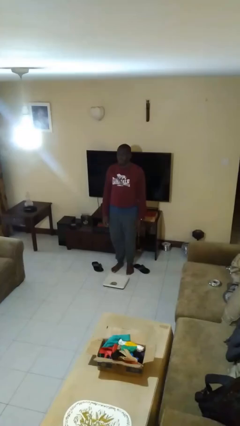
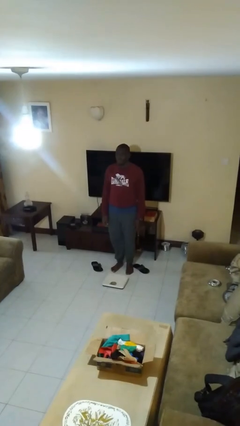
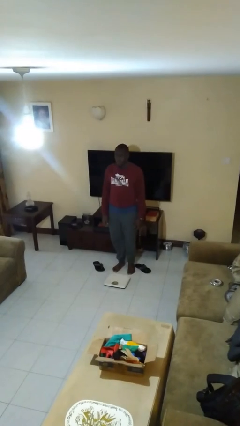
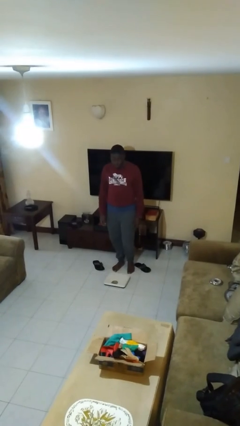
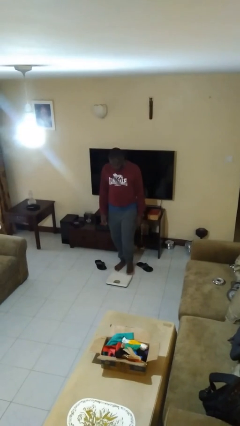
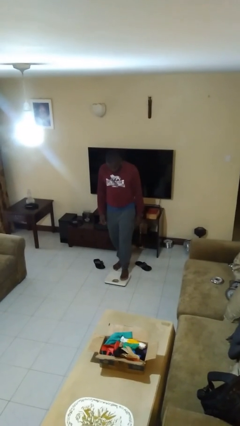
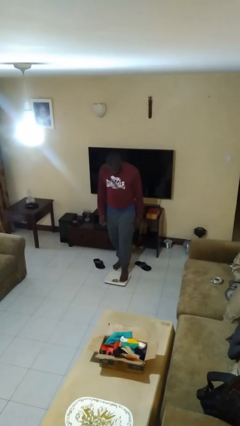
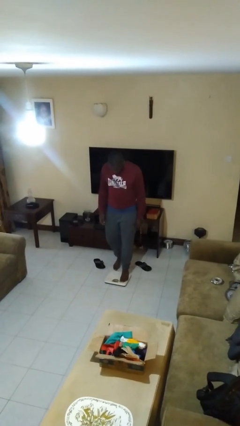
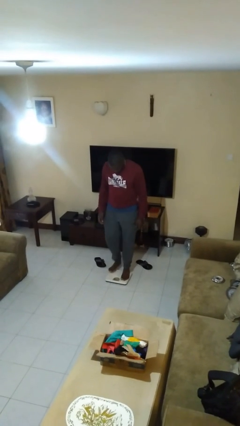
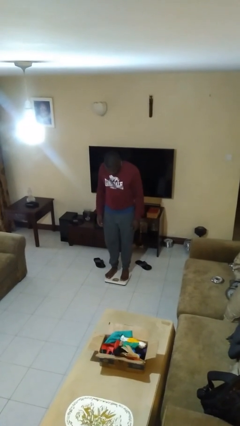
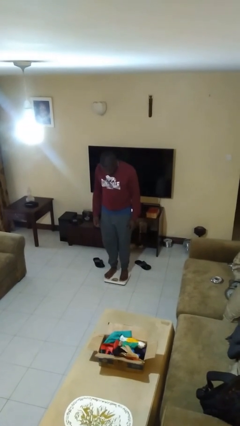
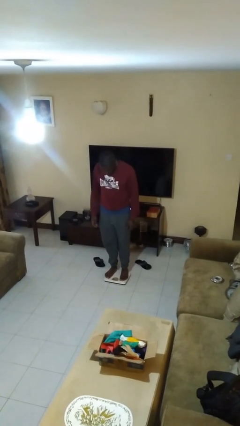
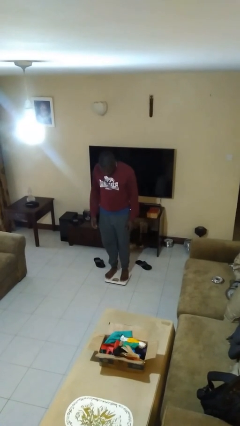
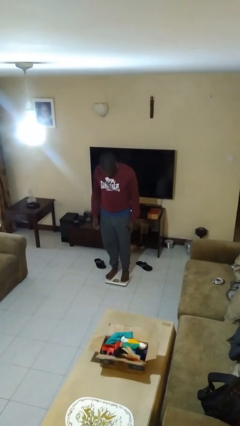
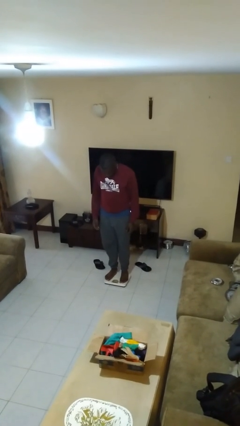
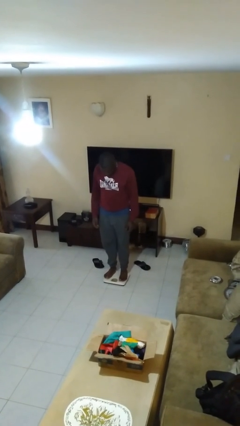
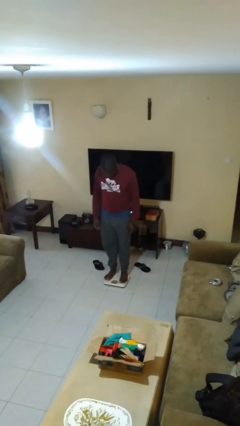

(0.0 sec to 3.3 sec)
person uses bodyweight scale

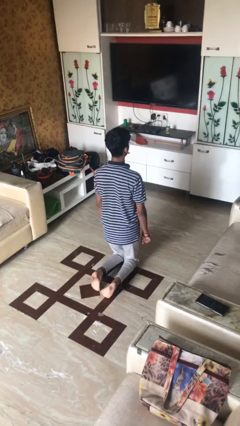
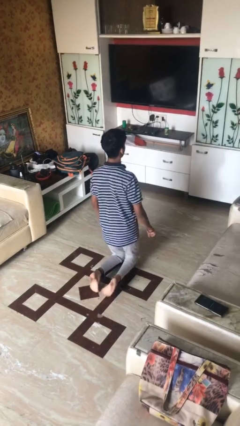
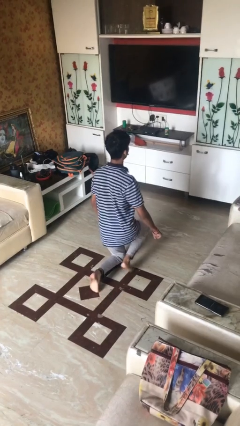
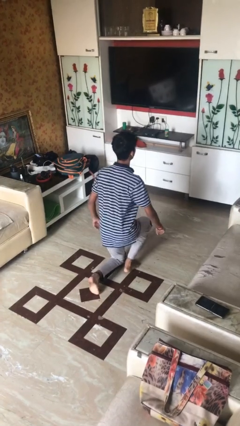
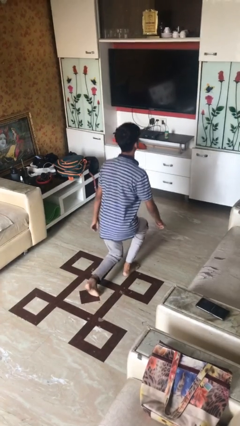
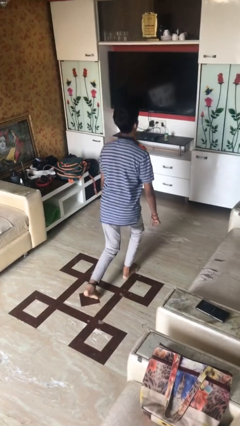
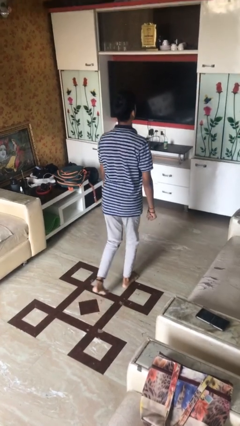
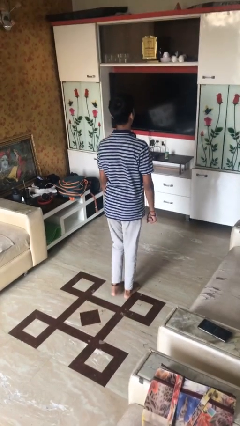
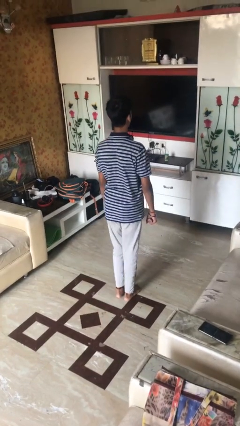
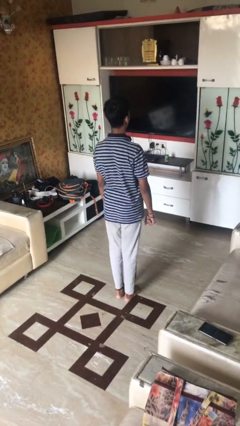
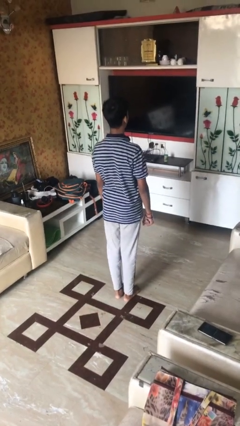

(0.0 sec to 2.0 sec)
person stands up from floor

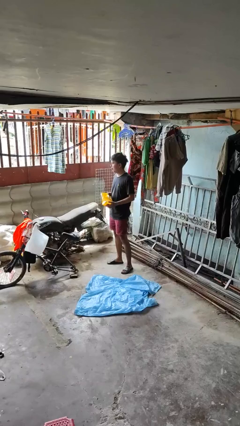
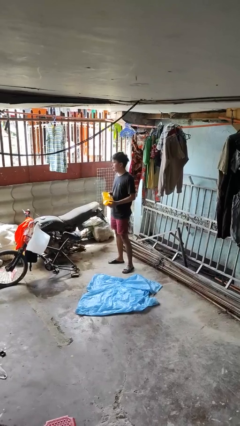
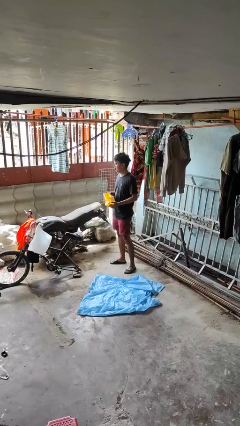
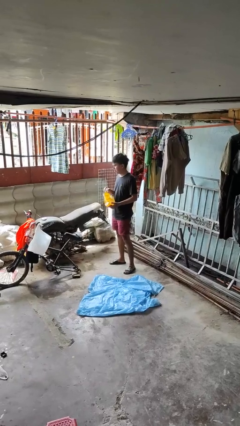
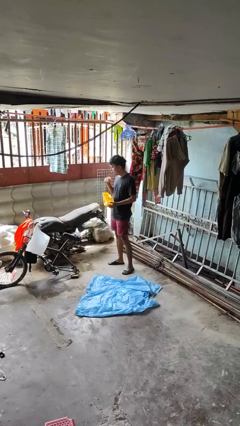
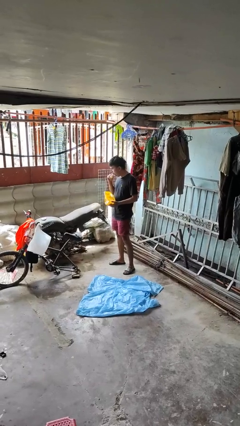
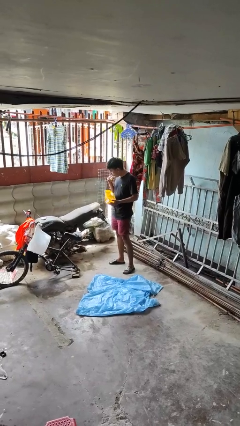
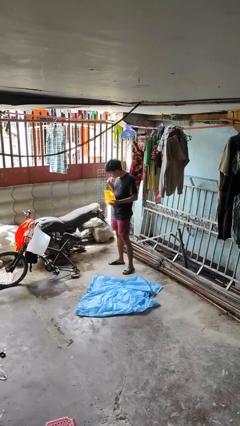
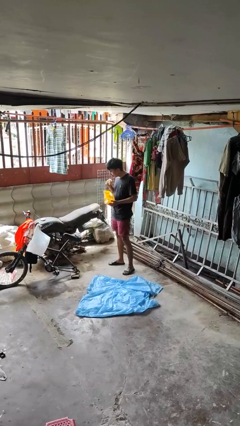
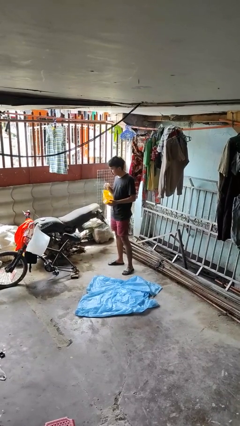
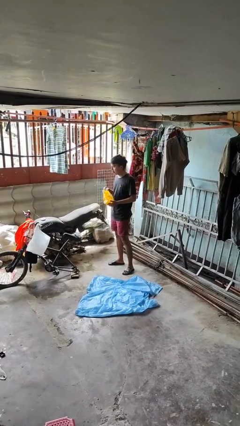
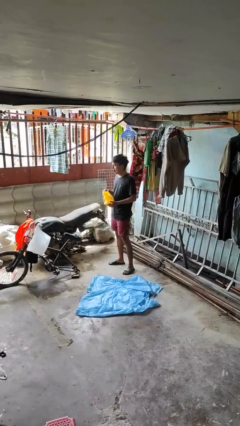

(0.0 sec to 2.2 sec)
person eats snack from bag

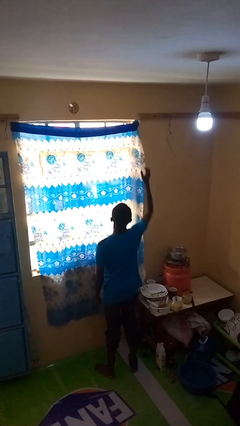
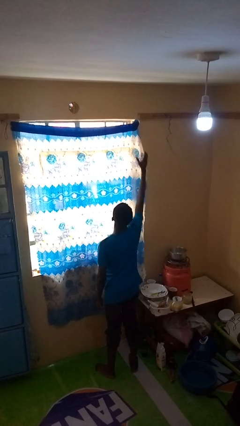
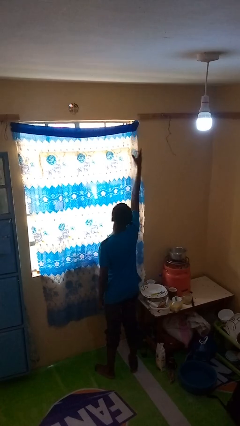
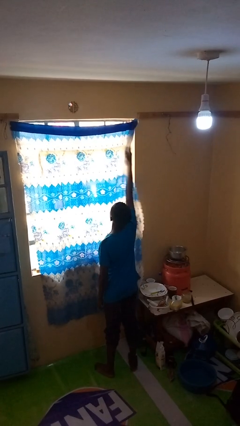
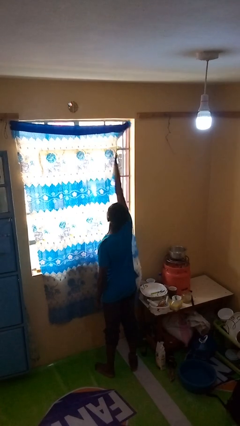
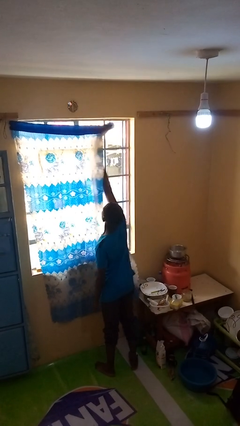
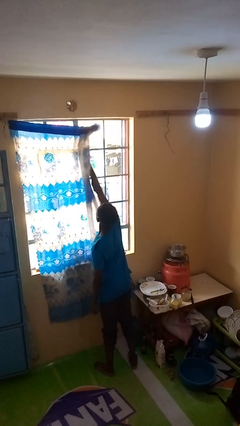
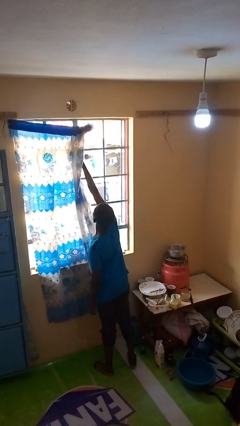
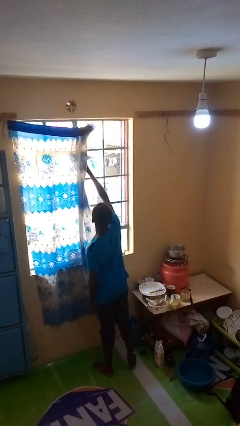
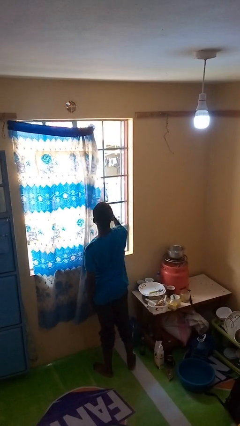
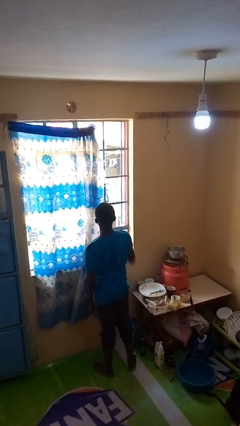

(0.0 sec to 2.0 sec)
person opens curtains

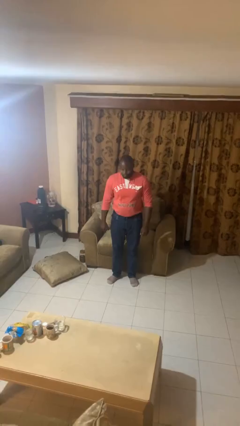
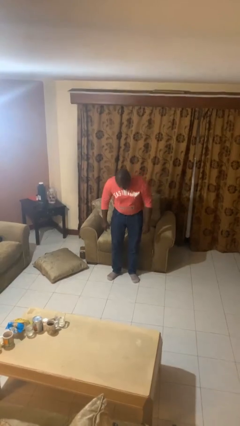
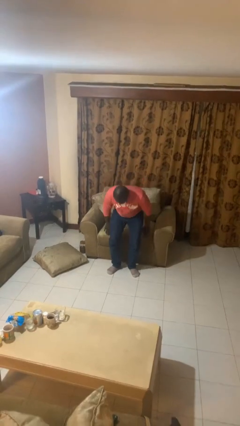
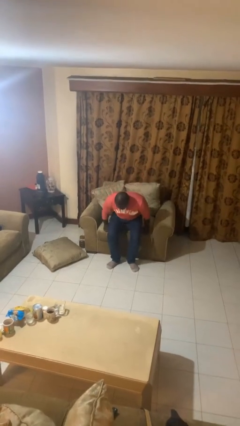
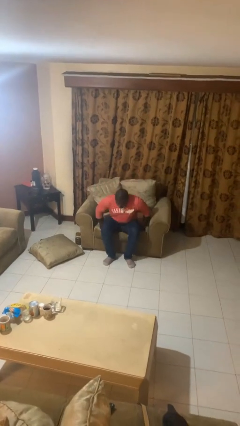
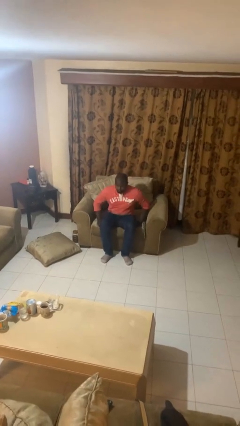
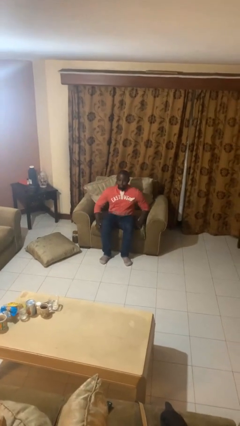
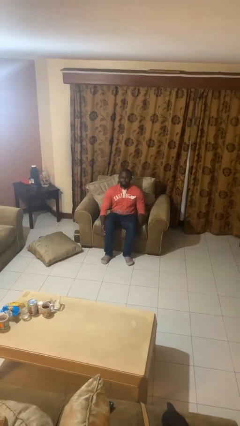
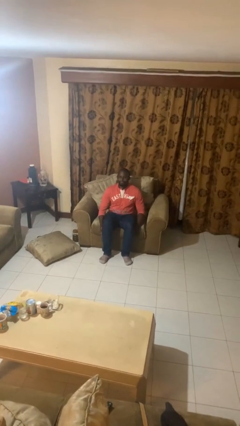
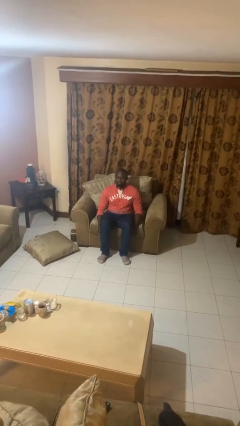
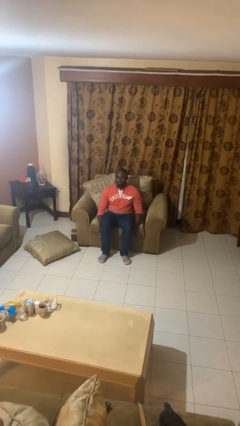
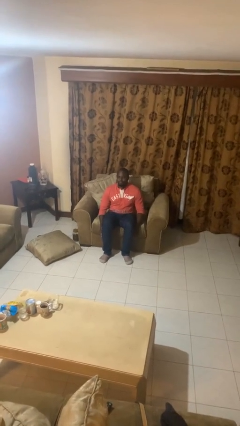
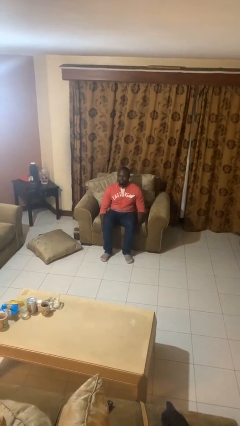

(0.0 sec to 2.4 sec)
person sits down

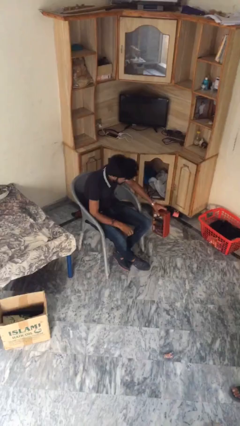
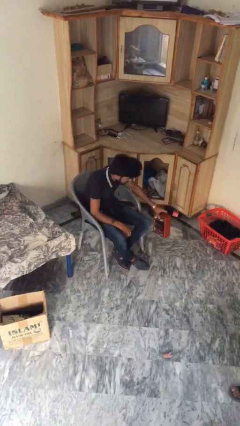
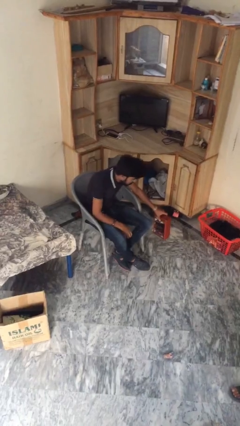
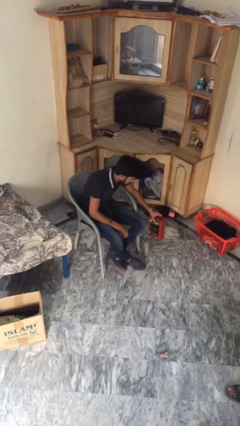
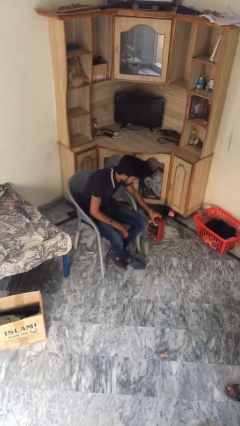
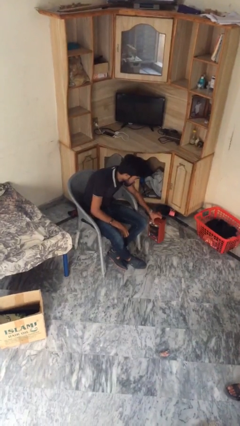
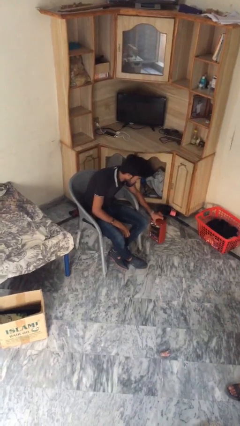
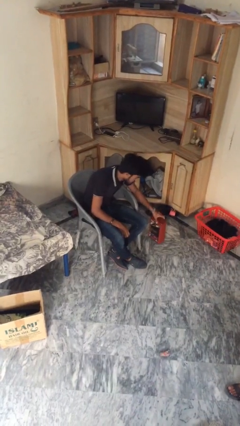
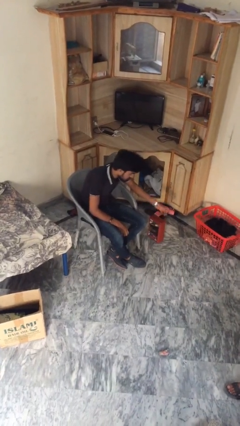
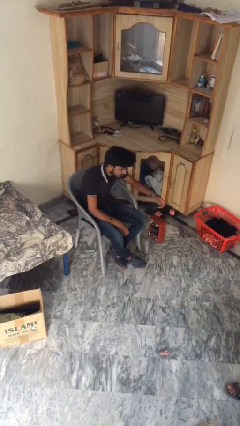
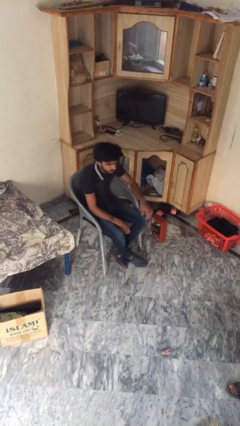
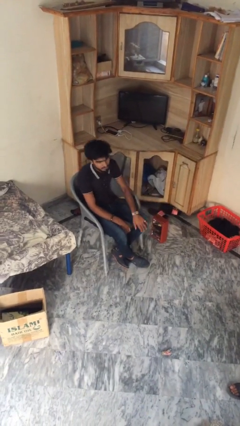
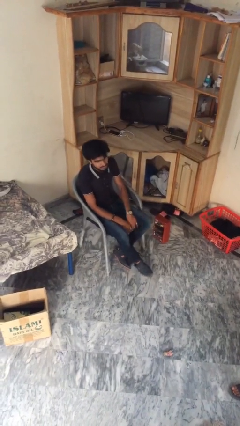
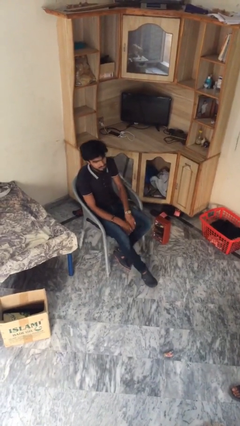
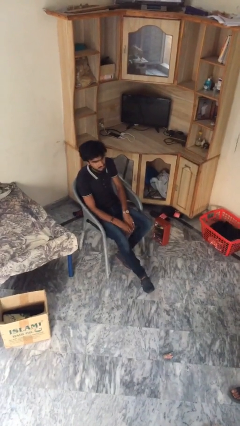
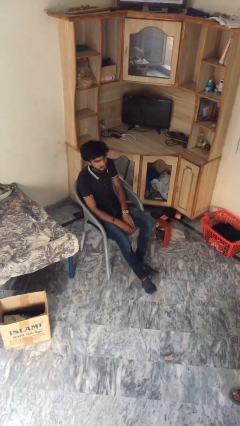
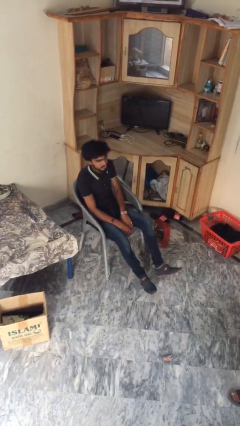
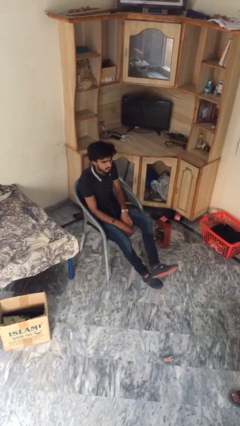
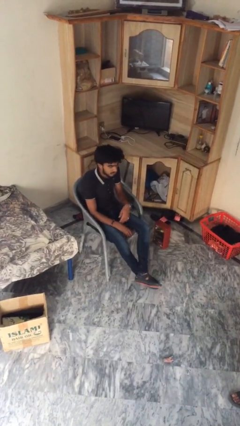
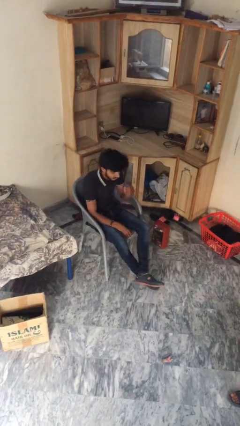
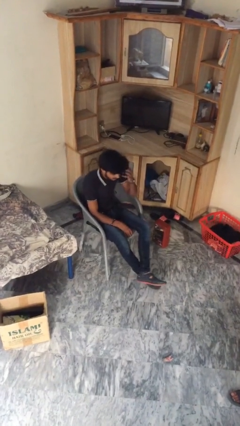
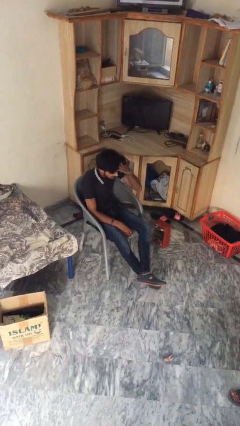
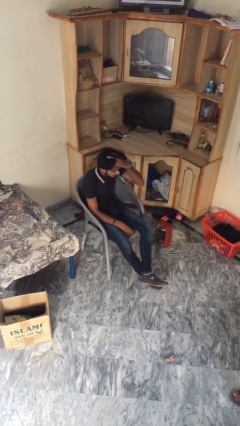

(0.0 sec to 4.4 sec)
person puts down object on floor

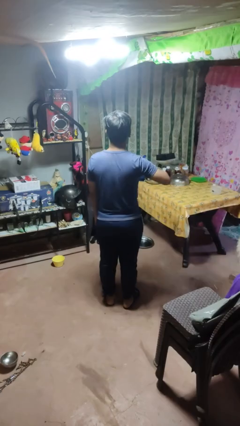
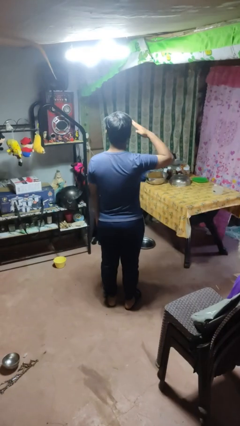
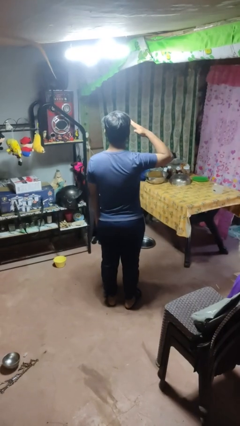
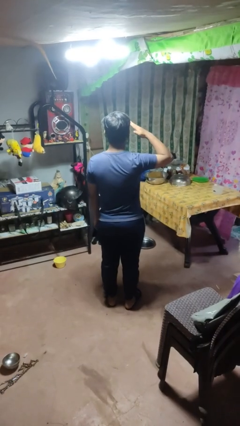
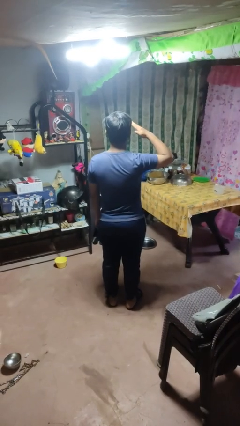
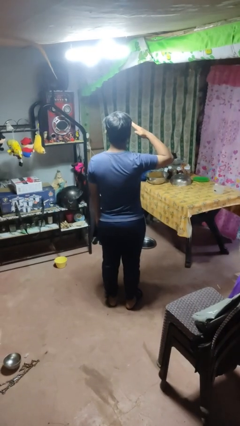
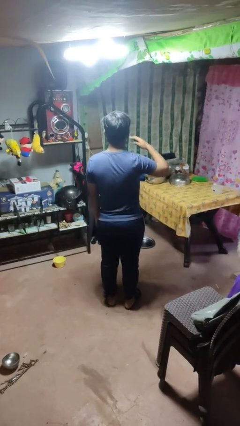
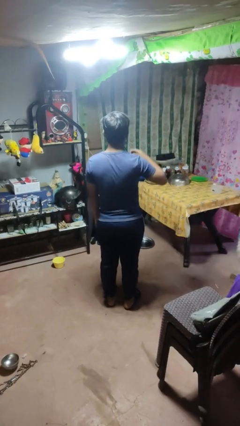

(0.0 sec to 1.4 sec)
person salutes
